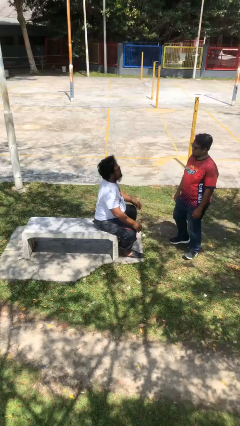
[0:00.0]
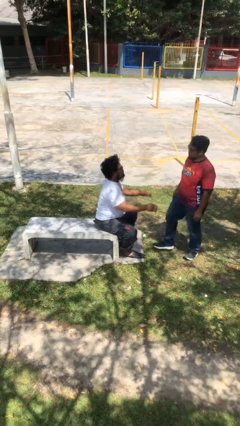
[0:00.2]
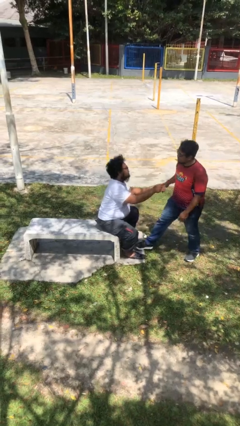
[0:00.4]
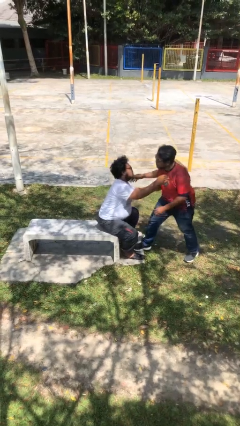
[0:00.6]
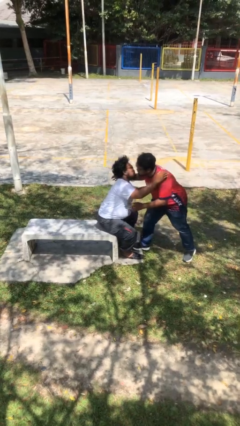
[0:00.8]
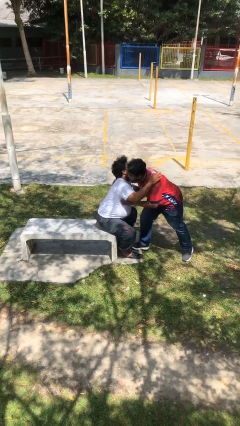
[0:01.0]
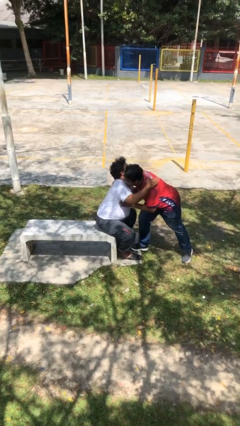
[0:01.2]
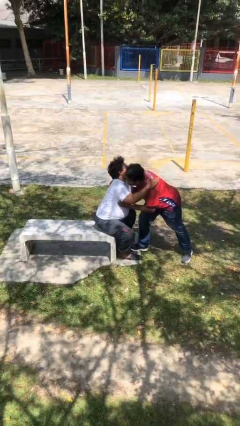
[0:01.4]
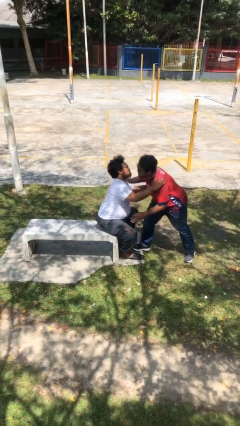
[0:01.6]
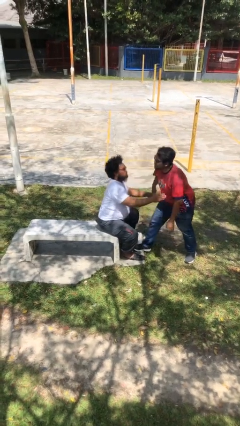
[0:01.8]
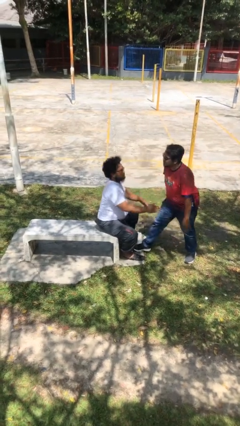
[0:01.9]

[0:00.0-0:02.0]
person embraces person

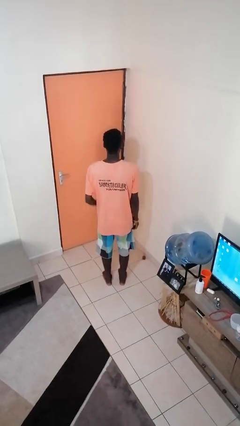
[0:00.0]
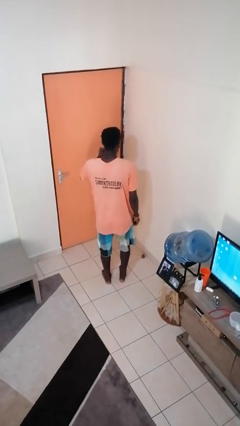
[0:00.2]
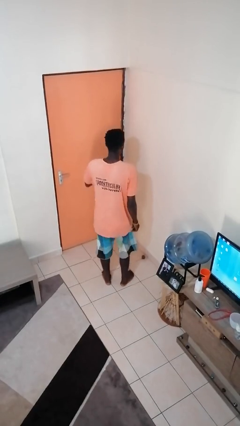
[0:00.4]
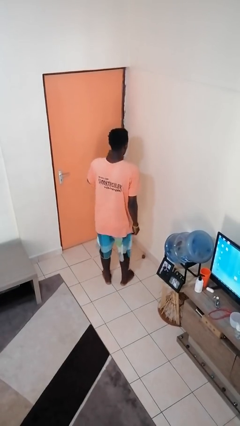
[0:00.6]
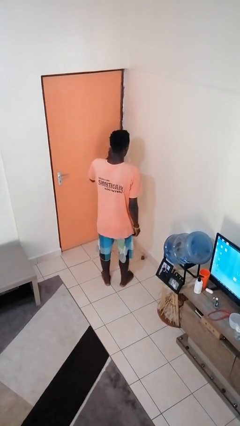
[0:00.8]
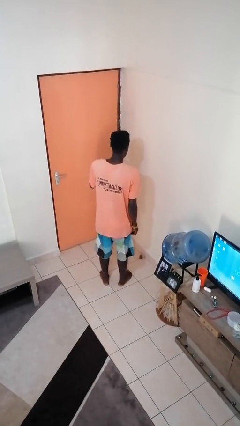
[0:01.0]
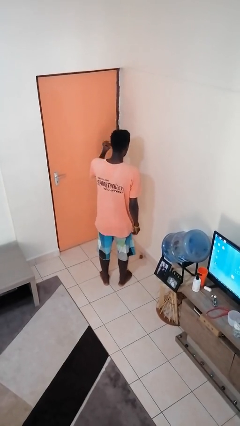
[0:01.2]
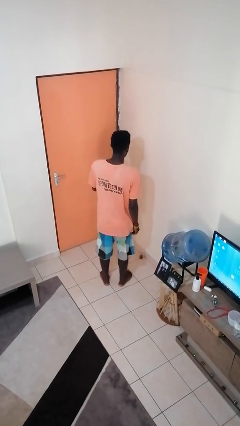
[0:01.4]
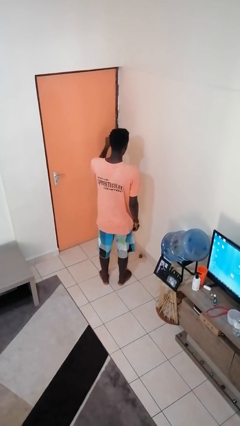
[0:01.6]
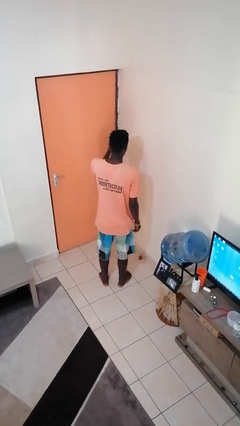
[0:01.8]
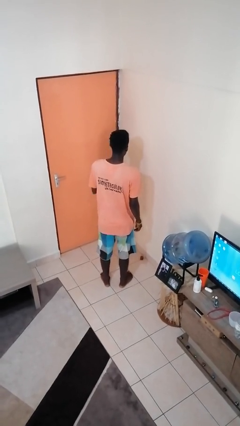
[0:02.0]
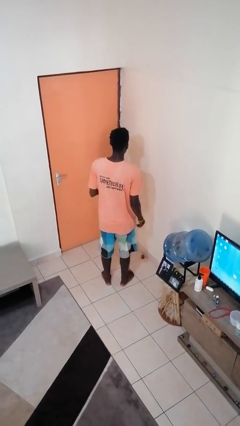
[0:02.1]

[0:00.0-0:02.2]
person snaps fingers

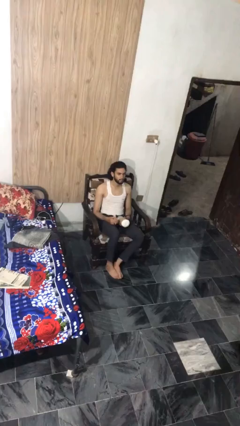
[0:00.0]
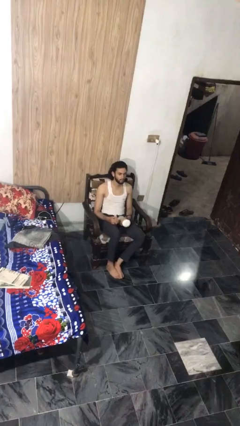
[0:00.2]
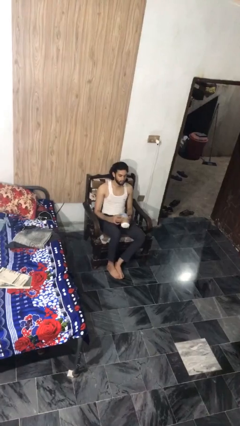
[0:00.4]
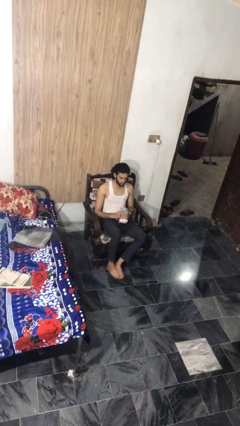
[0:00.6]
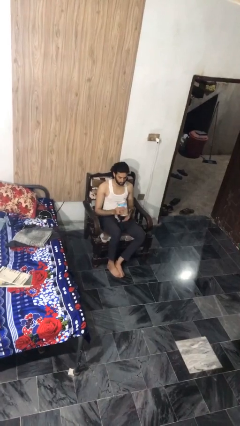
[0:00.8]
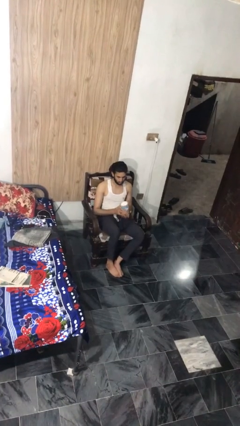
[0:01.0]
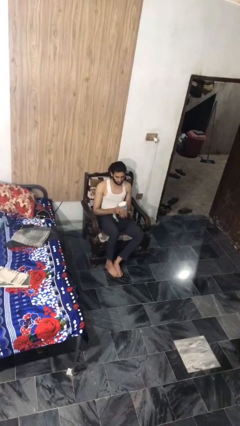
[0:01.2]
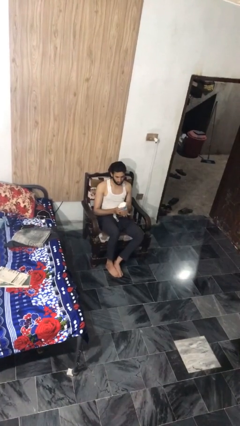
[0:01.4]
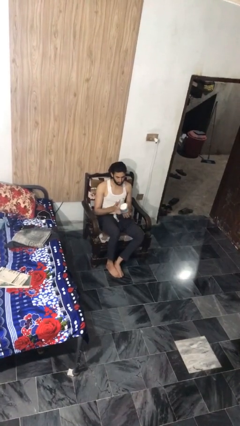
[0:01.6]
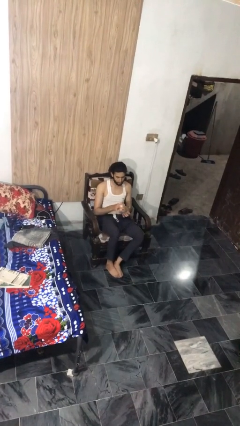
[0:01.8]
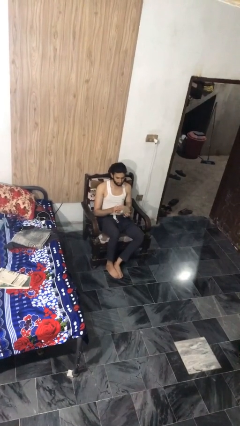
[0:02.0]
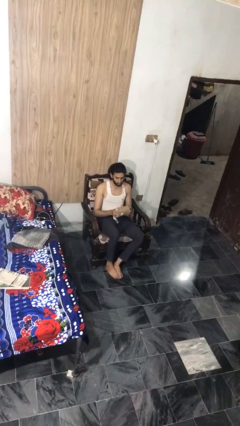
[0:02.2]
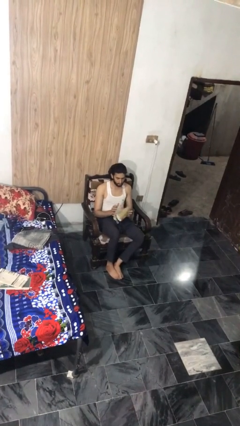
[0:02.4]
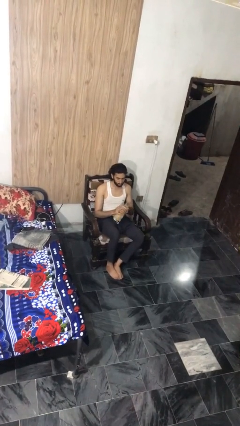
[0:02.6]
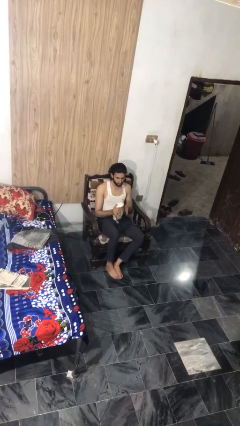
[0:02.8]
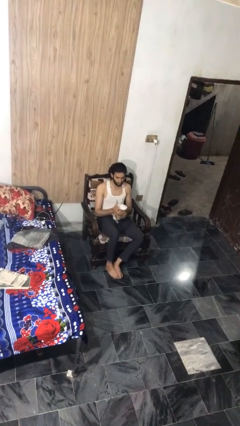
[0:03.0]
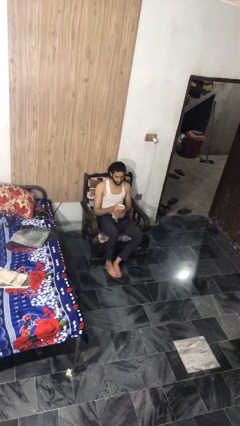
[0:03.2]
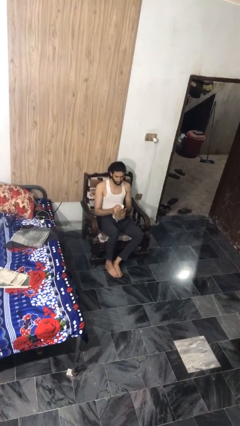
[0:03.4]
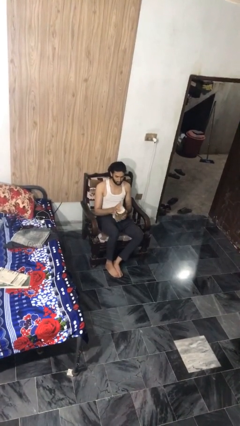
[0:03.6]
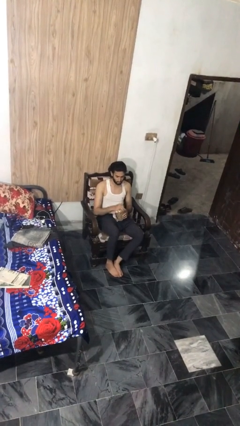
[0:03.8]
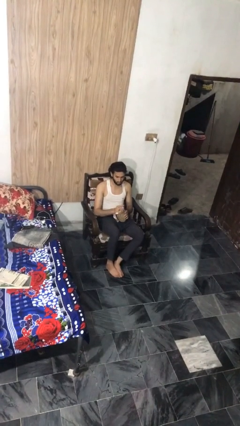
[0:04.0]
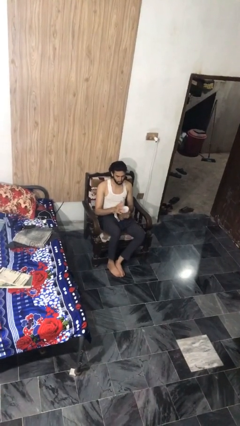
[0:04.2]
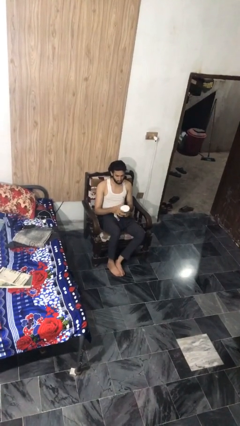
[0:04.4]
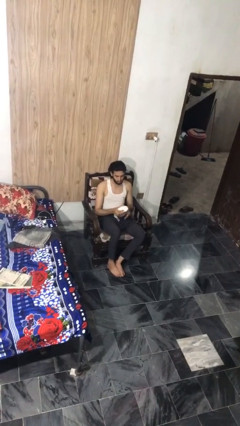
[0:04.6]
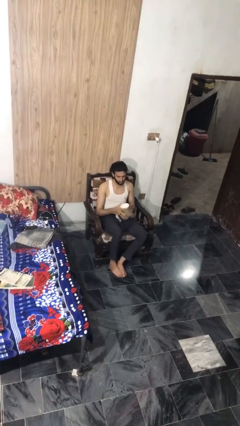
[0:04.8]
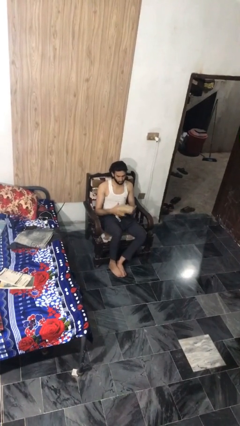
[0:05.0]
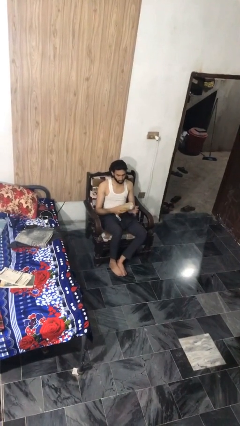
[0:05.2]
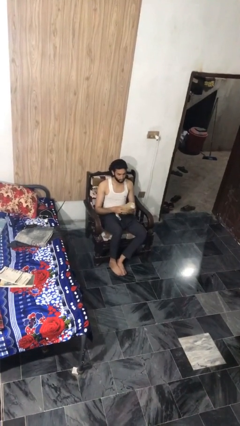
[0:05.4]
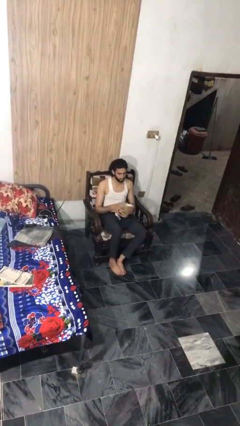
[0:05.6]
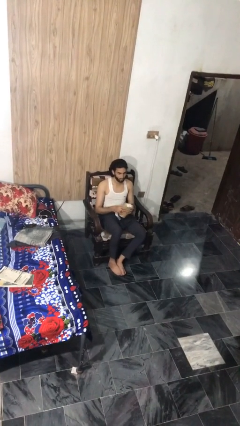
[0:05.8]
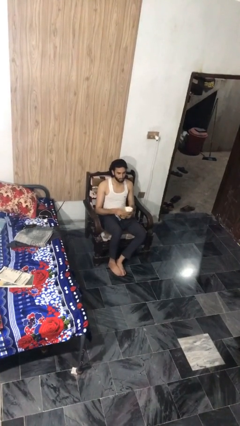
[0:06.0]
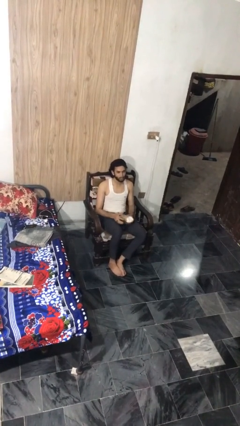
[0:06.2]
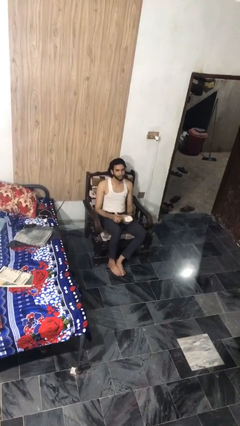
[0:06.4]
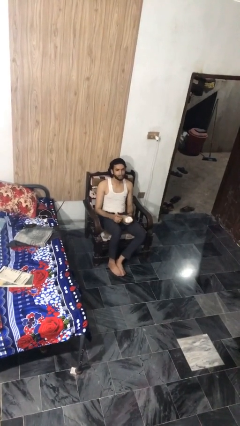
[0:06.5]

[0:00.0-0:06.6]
person squeezes object

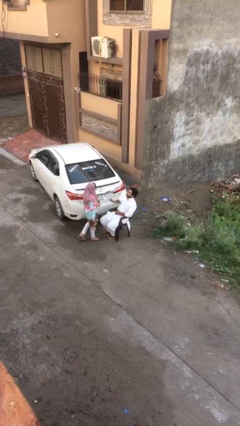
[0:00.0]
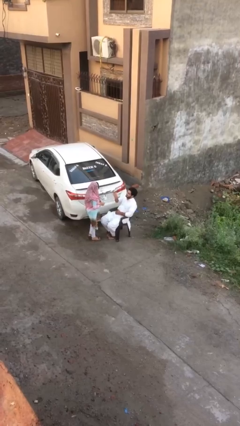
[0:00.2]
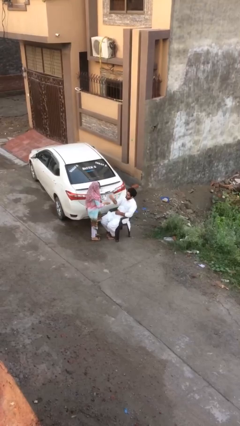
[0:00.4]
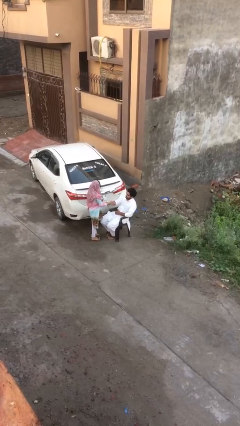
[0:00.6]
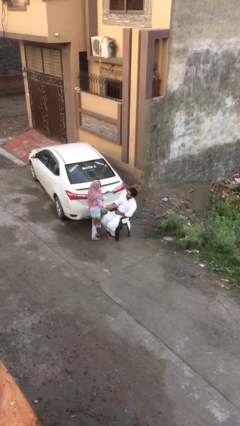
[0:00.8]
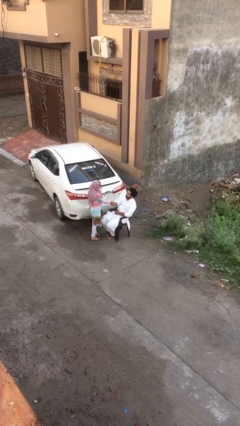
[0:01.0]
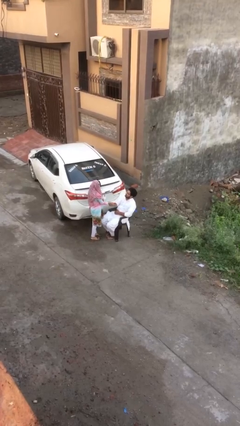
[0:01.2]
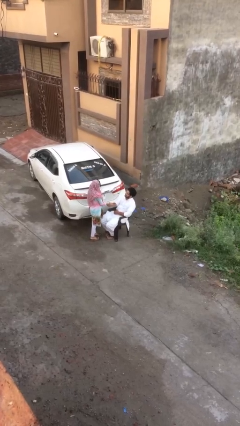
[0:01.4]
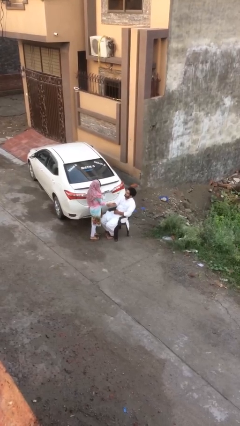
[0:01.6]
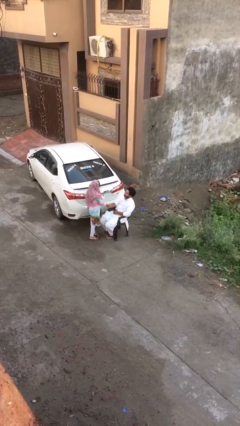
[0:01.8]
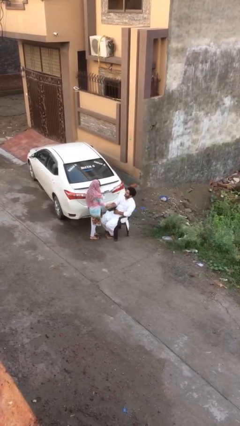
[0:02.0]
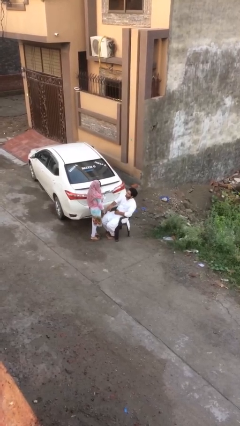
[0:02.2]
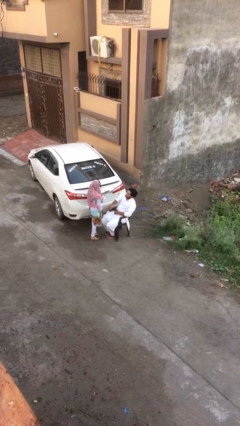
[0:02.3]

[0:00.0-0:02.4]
person shakes hand

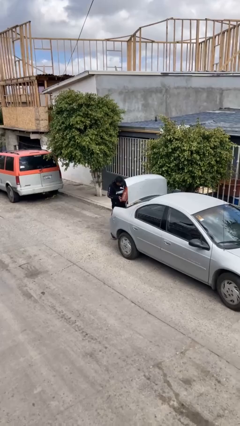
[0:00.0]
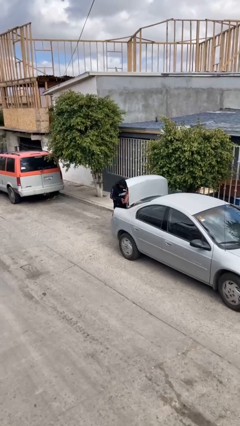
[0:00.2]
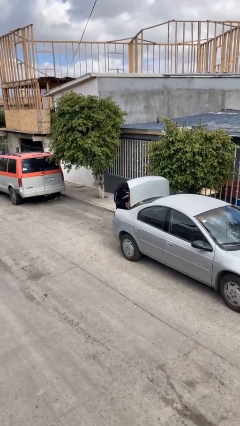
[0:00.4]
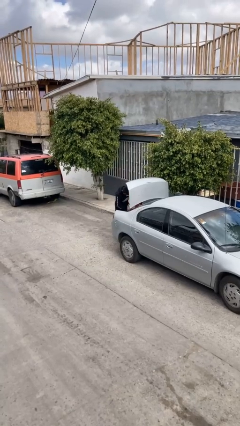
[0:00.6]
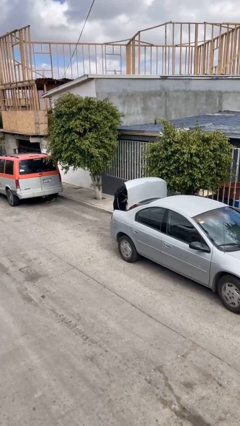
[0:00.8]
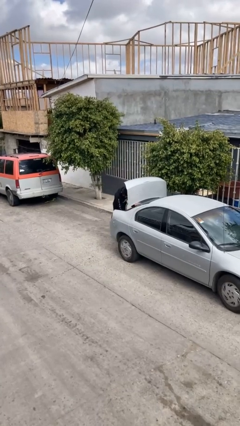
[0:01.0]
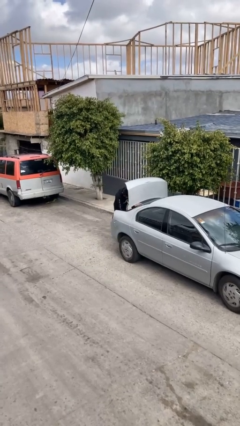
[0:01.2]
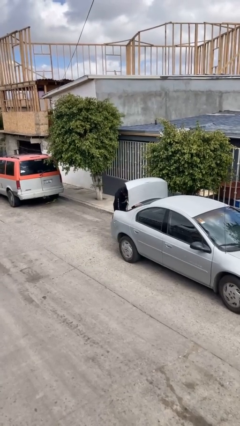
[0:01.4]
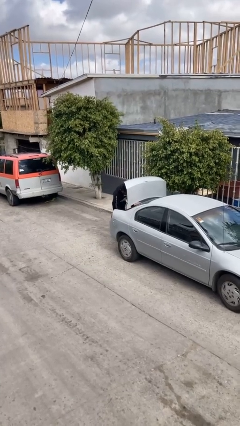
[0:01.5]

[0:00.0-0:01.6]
person loads car

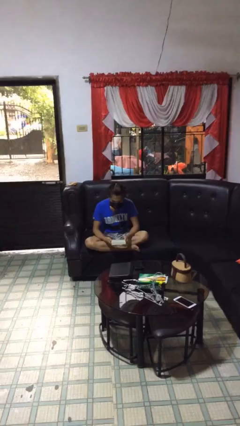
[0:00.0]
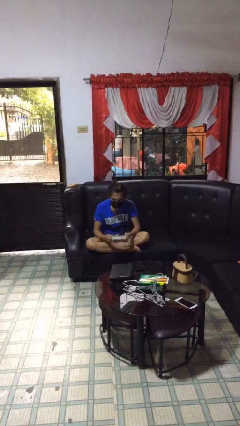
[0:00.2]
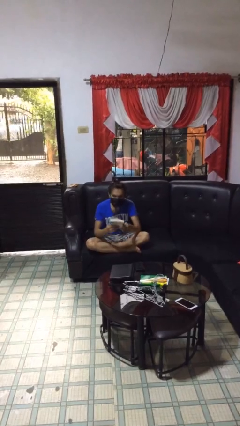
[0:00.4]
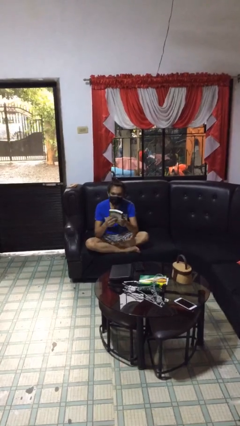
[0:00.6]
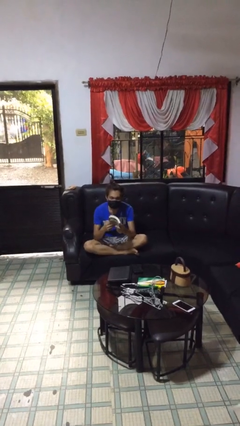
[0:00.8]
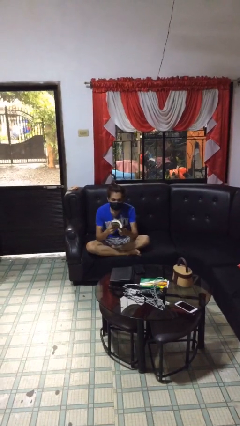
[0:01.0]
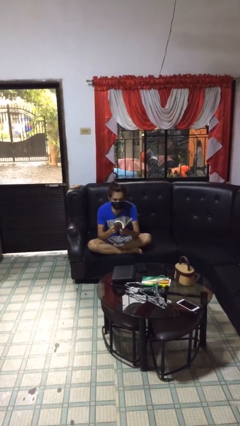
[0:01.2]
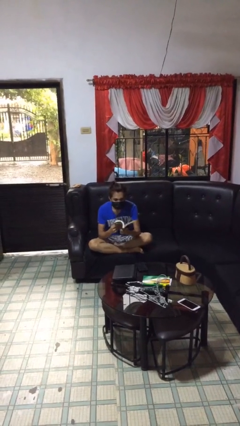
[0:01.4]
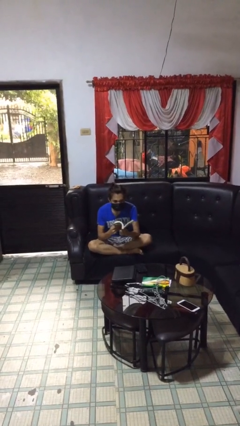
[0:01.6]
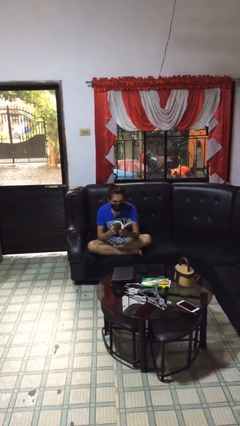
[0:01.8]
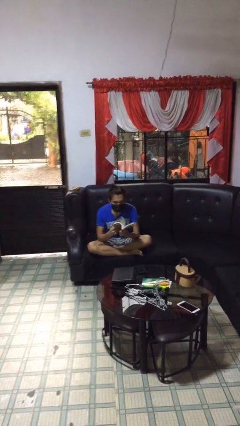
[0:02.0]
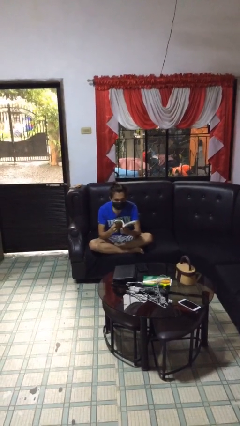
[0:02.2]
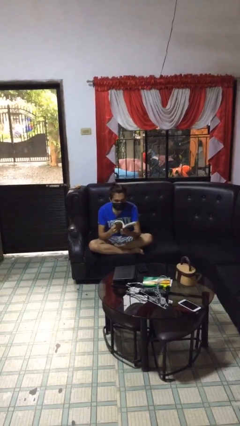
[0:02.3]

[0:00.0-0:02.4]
person reads document
